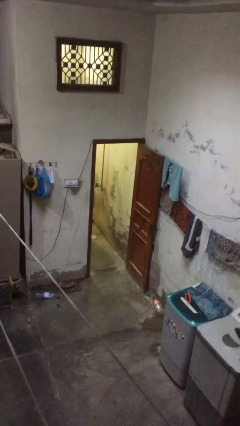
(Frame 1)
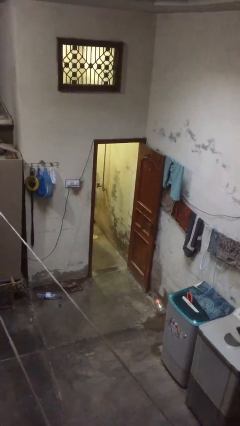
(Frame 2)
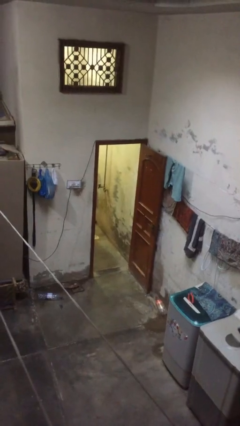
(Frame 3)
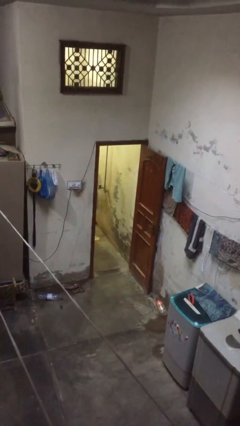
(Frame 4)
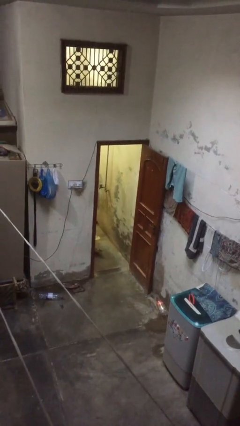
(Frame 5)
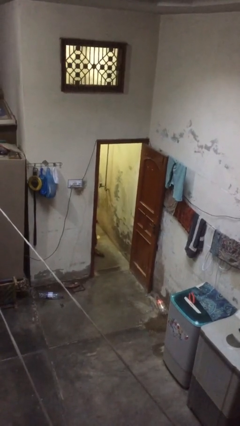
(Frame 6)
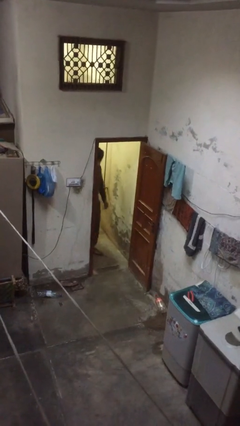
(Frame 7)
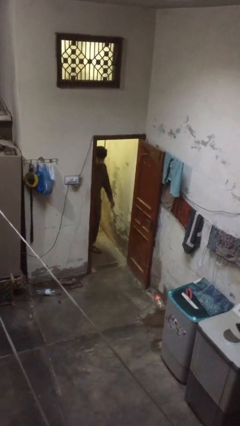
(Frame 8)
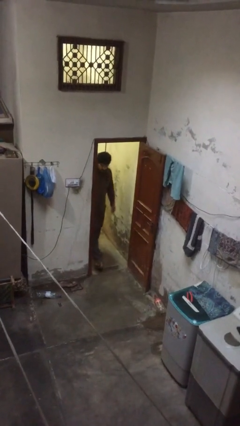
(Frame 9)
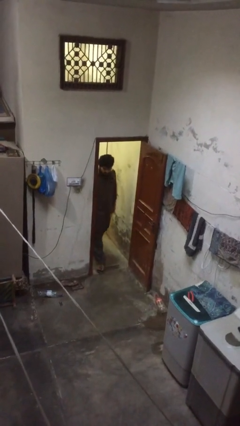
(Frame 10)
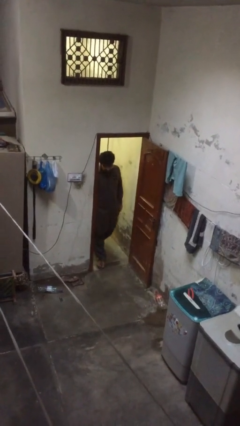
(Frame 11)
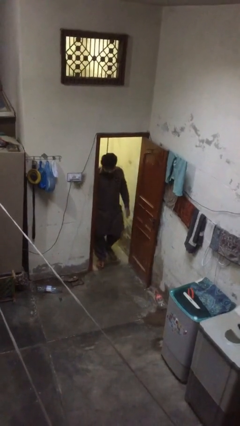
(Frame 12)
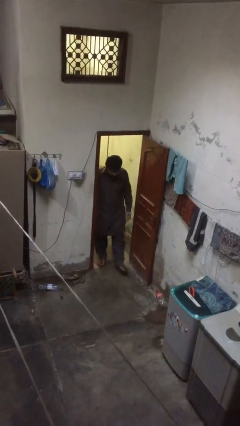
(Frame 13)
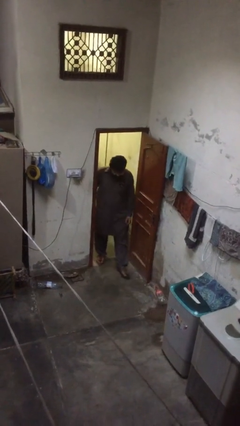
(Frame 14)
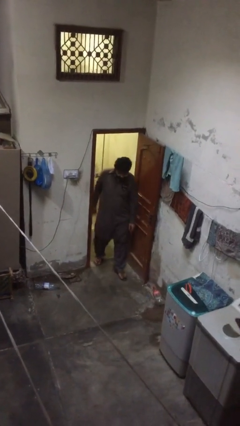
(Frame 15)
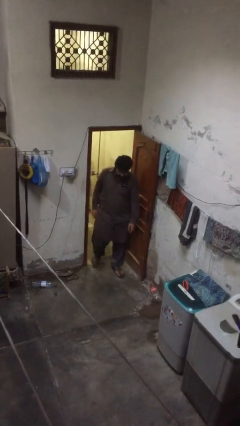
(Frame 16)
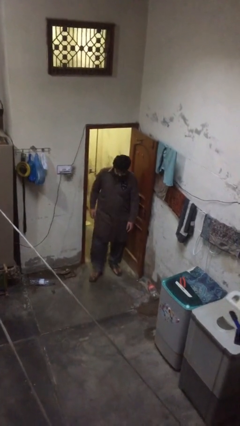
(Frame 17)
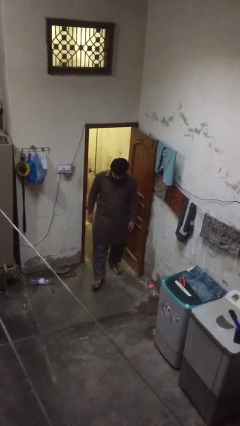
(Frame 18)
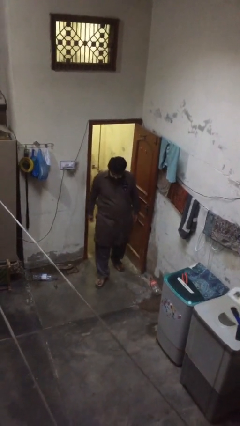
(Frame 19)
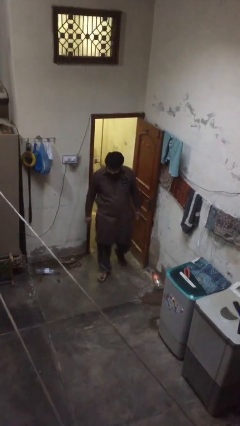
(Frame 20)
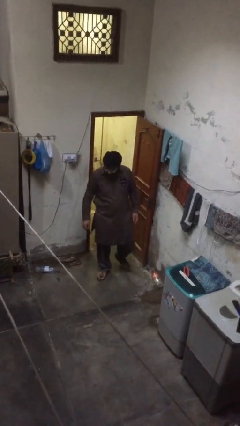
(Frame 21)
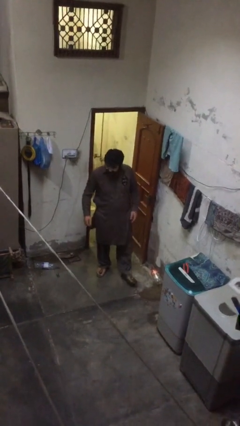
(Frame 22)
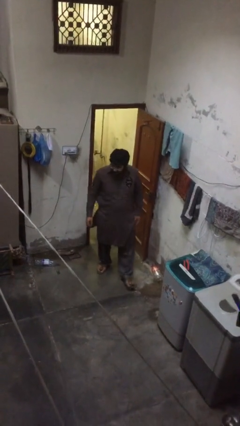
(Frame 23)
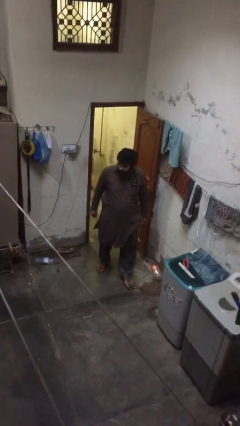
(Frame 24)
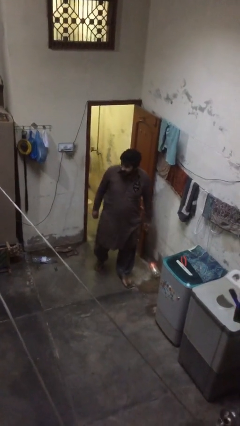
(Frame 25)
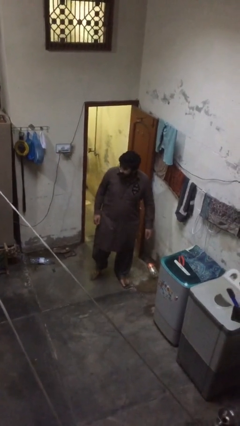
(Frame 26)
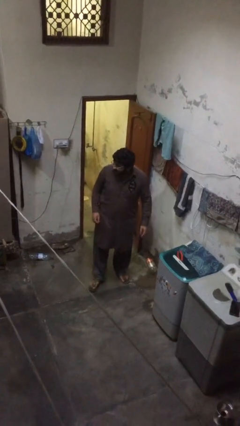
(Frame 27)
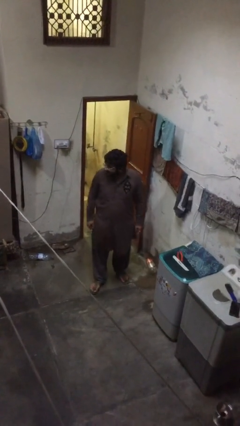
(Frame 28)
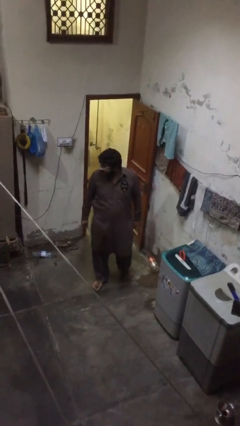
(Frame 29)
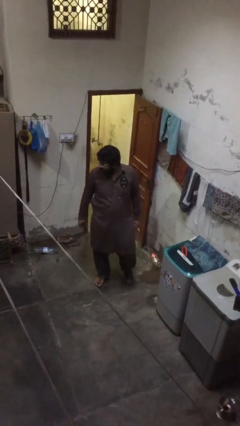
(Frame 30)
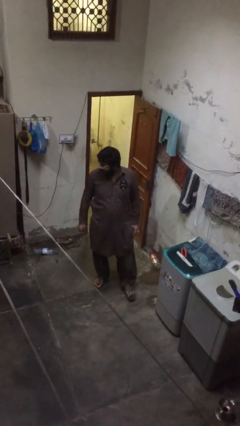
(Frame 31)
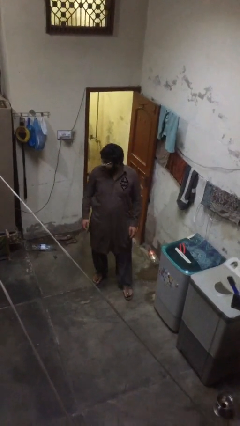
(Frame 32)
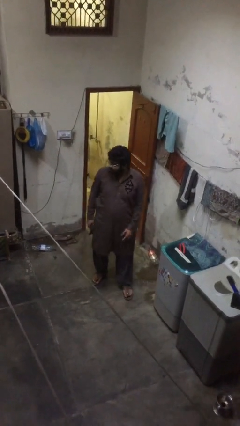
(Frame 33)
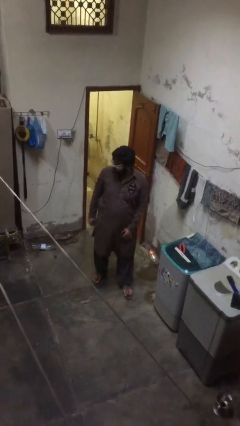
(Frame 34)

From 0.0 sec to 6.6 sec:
person enters scene through structure

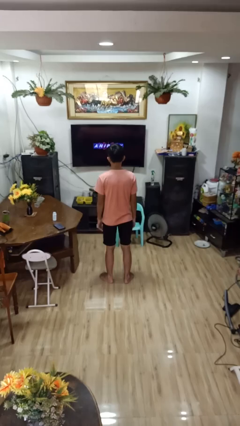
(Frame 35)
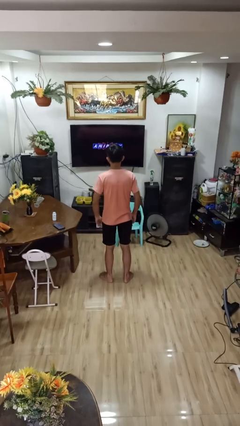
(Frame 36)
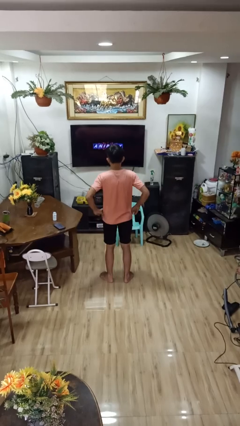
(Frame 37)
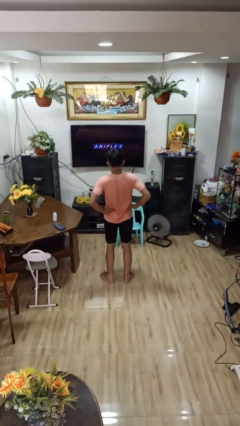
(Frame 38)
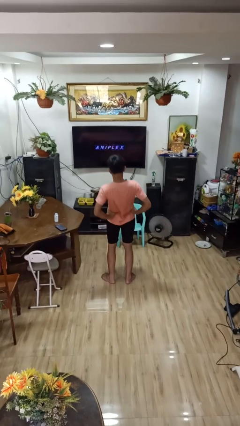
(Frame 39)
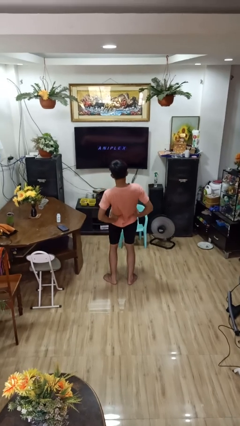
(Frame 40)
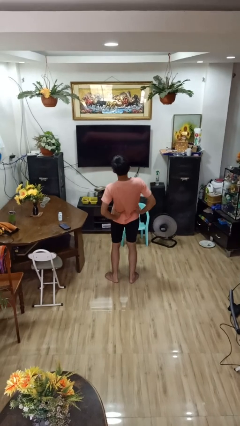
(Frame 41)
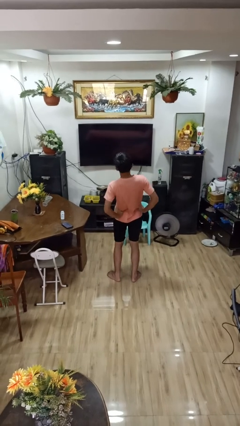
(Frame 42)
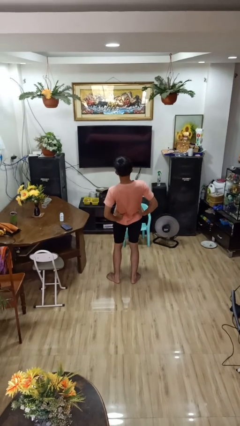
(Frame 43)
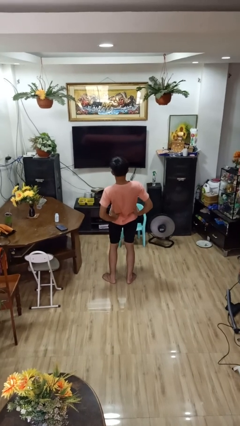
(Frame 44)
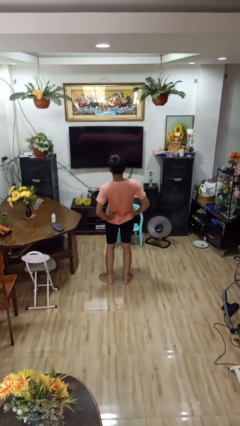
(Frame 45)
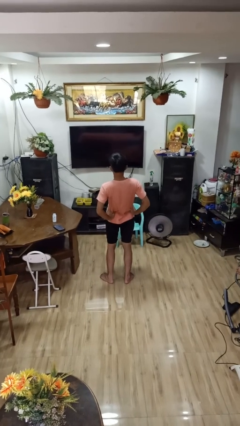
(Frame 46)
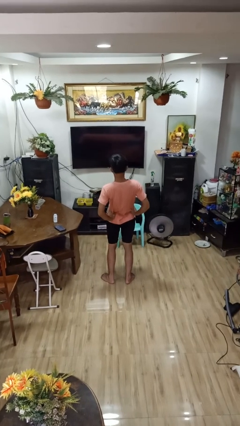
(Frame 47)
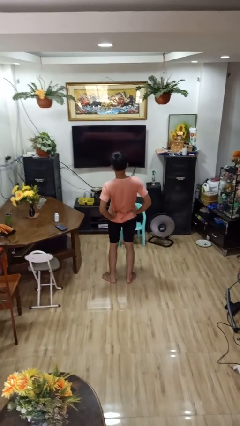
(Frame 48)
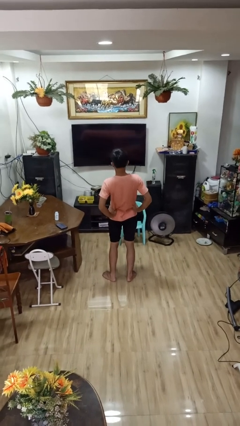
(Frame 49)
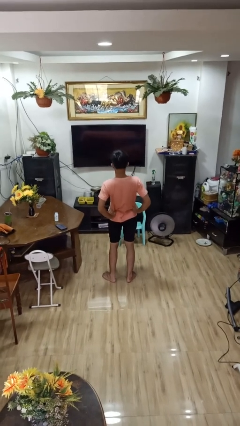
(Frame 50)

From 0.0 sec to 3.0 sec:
person stretches back

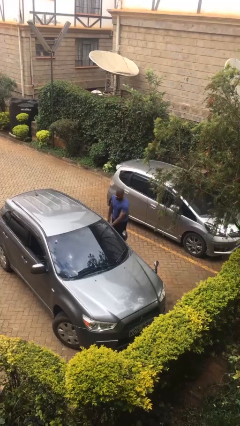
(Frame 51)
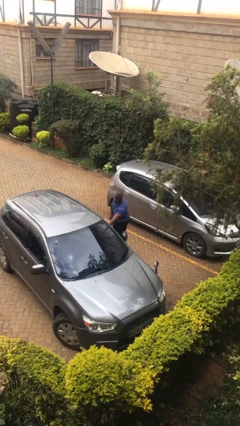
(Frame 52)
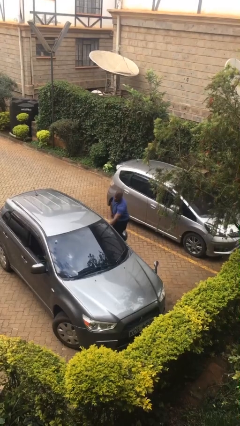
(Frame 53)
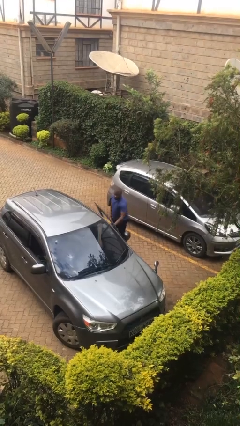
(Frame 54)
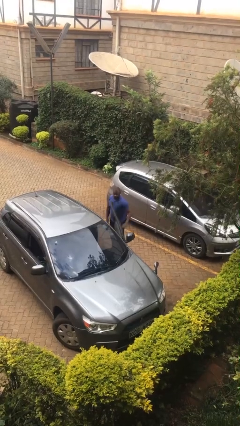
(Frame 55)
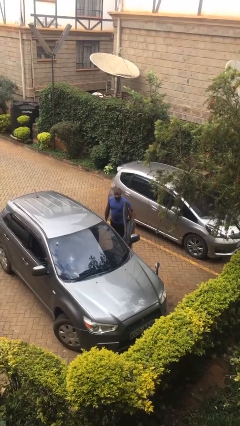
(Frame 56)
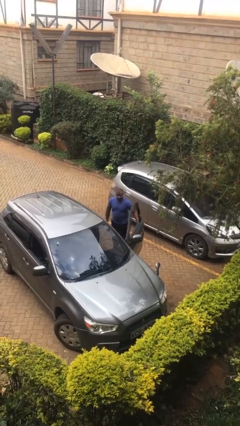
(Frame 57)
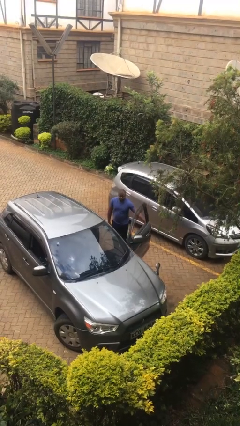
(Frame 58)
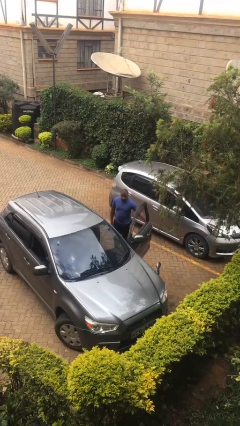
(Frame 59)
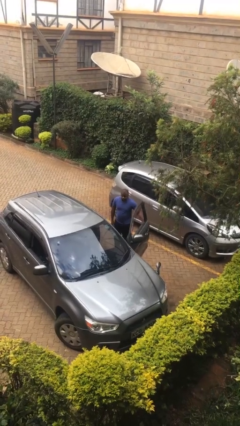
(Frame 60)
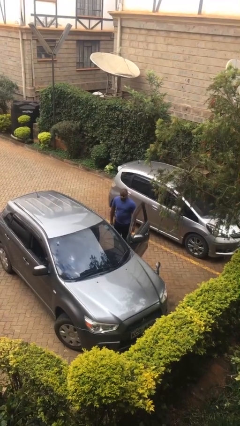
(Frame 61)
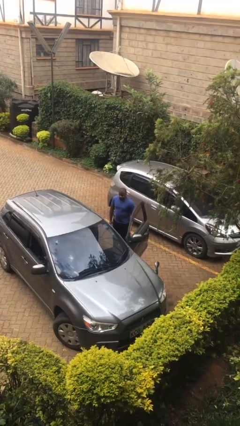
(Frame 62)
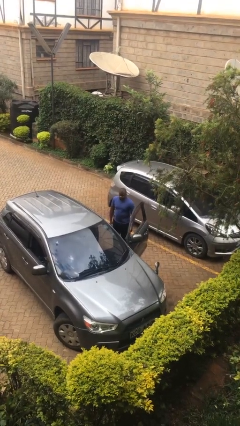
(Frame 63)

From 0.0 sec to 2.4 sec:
person opens car door

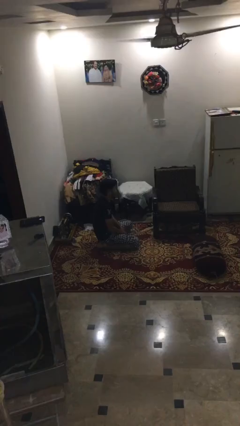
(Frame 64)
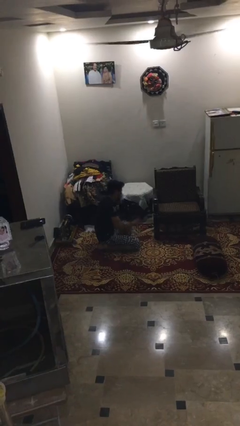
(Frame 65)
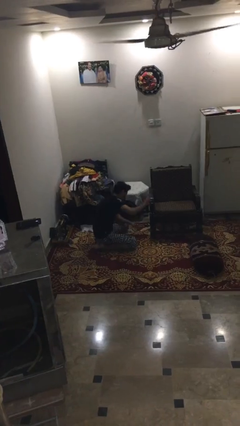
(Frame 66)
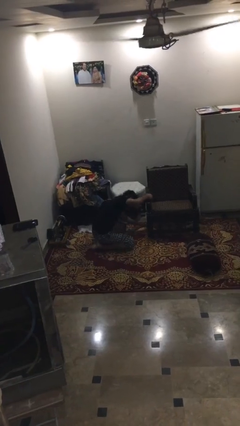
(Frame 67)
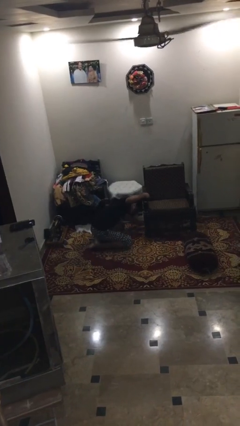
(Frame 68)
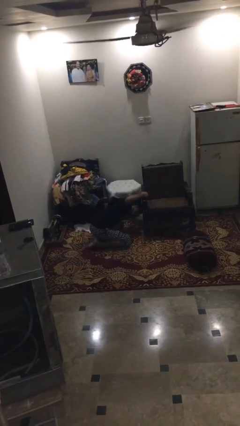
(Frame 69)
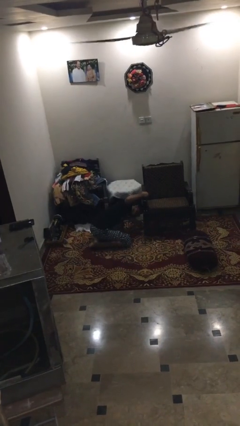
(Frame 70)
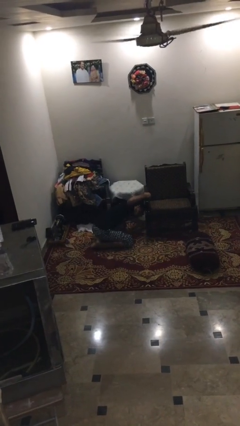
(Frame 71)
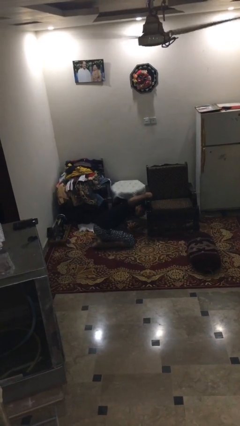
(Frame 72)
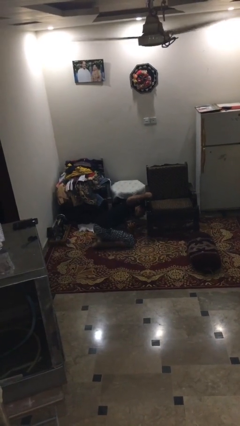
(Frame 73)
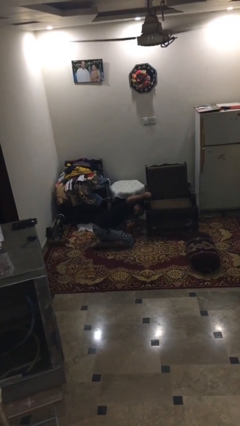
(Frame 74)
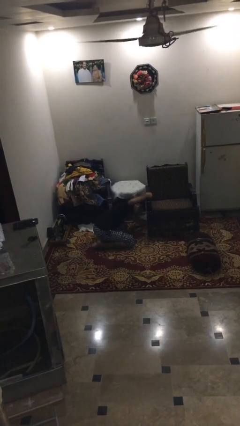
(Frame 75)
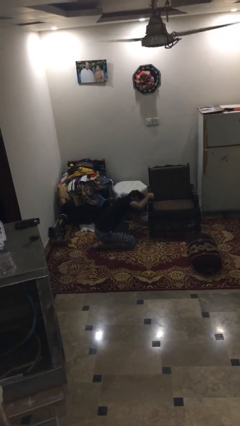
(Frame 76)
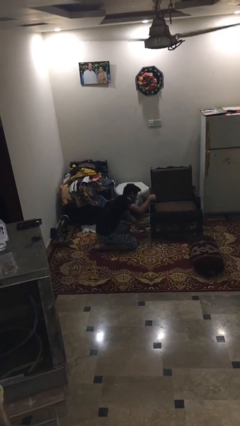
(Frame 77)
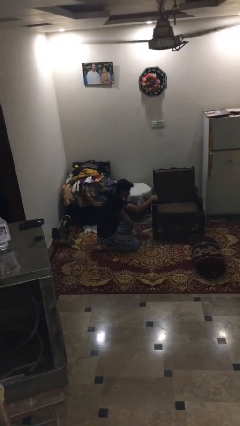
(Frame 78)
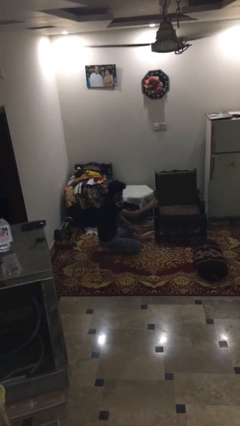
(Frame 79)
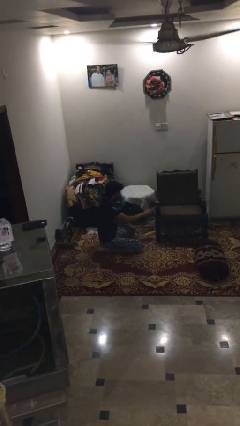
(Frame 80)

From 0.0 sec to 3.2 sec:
person searches in couch

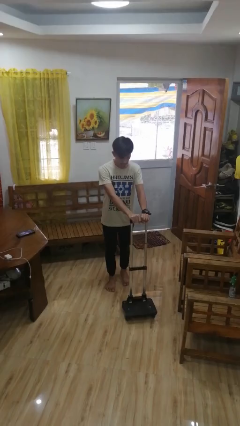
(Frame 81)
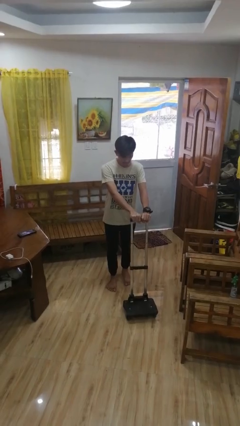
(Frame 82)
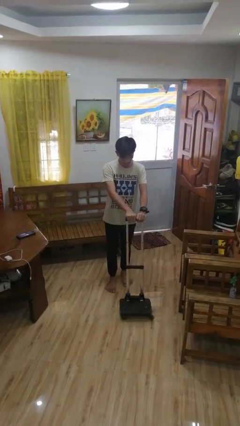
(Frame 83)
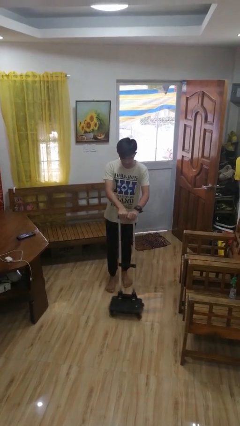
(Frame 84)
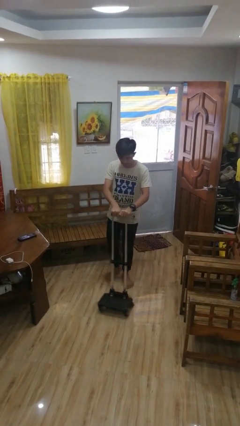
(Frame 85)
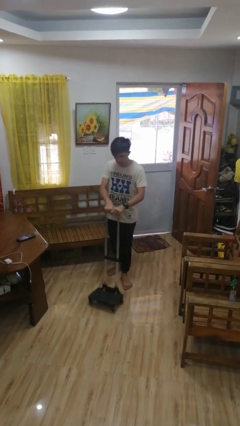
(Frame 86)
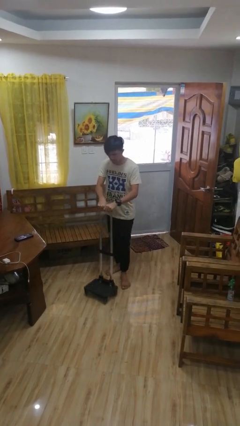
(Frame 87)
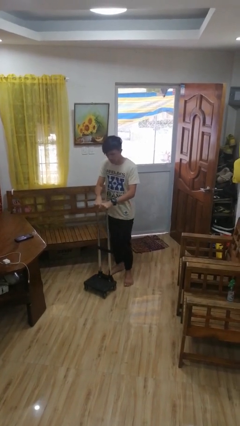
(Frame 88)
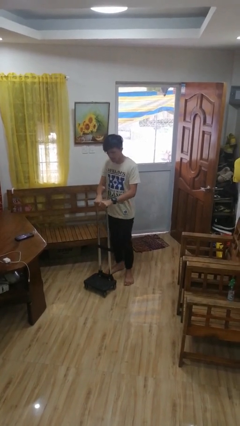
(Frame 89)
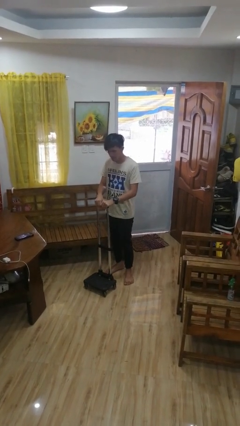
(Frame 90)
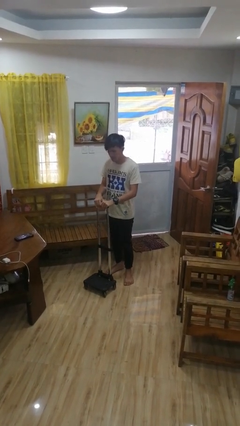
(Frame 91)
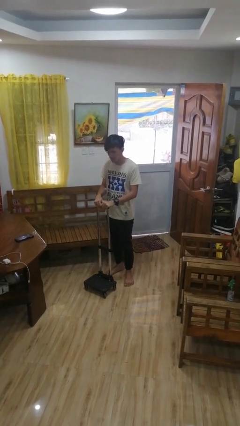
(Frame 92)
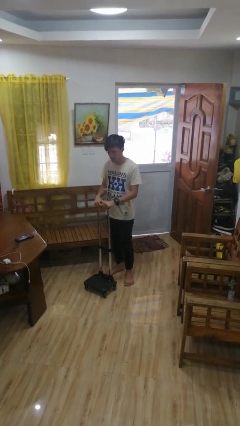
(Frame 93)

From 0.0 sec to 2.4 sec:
person pulls wheeled cart
